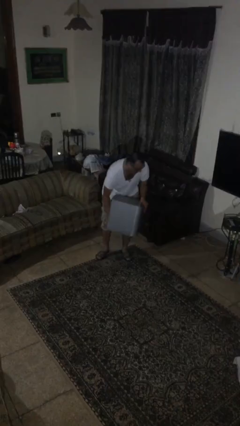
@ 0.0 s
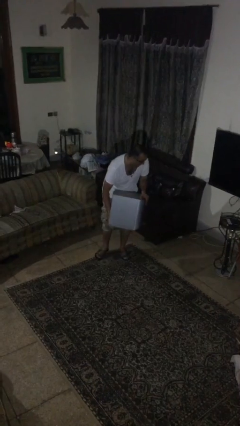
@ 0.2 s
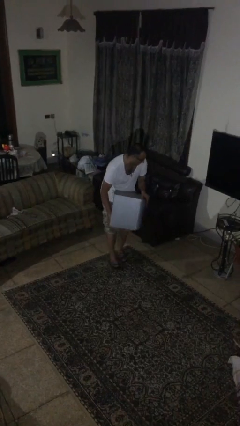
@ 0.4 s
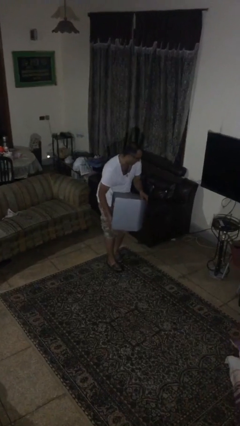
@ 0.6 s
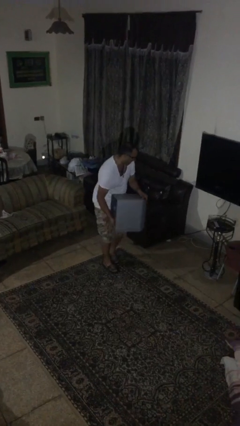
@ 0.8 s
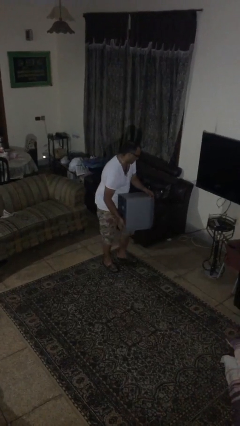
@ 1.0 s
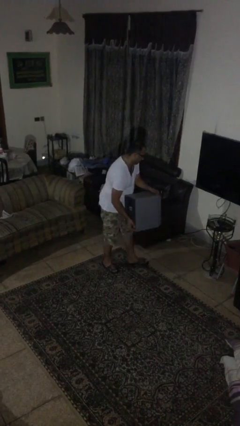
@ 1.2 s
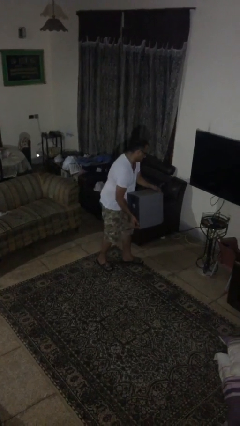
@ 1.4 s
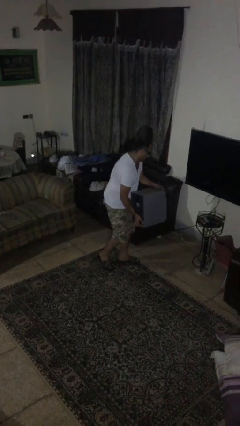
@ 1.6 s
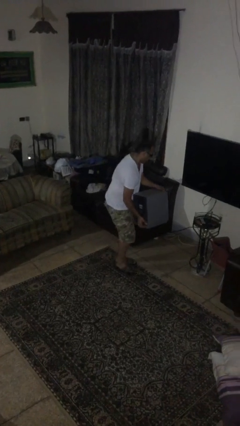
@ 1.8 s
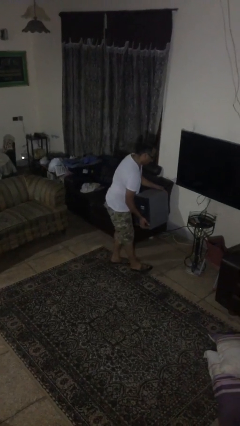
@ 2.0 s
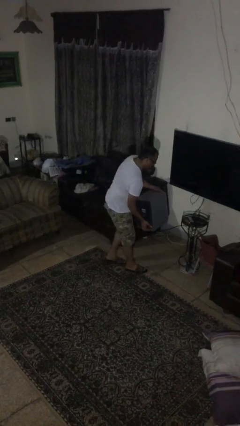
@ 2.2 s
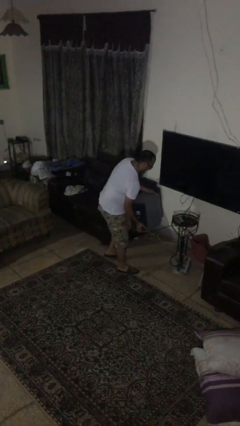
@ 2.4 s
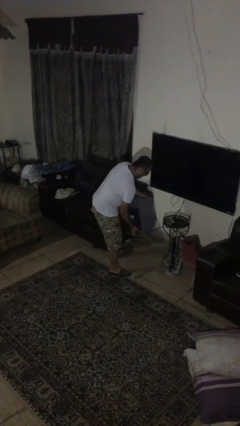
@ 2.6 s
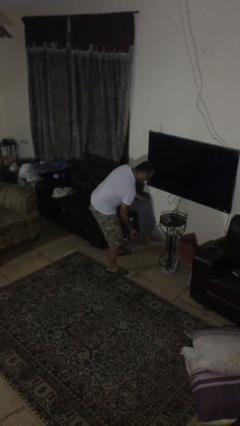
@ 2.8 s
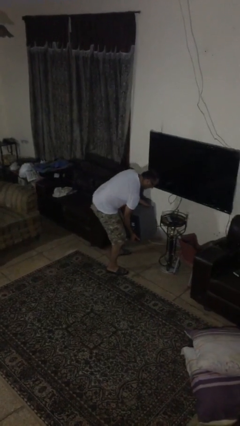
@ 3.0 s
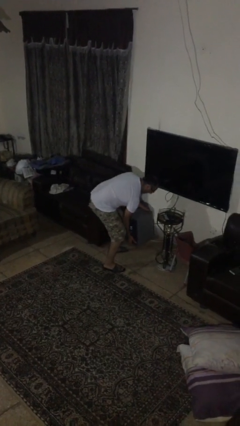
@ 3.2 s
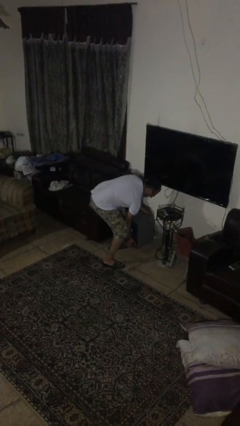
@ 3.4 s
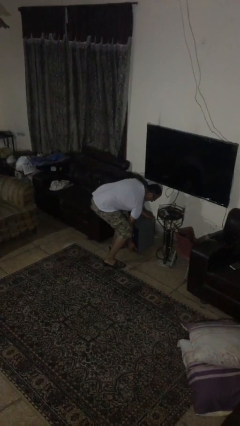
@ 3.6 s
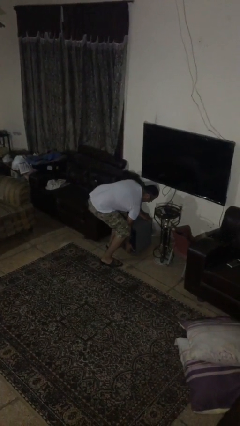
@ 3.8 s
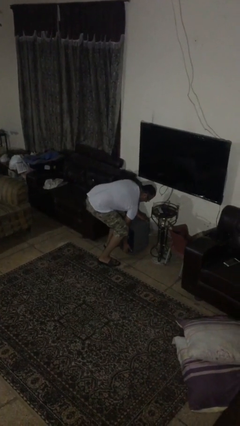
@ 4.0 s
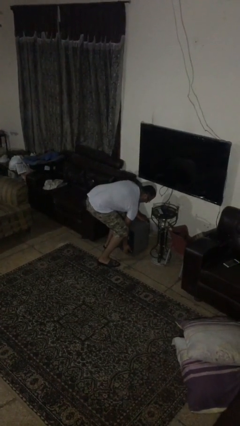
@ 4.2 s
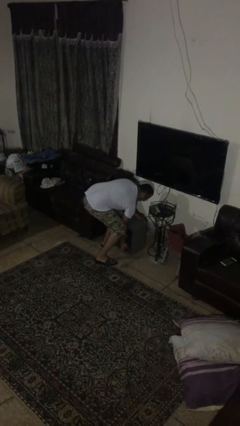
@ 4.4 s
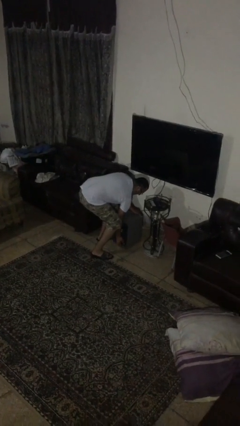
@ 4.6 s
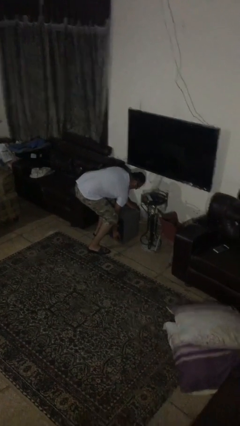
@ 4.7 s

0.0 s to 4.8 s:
person carries heavy object

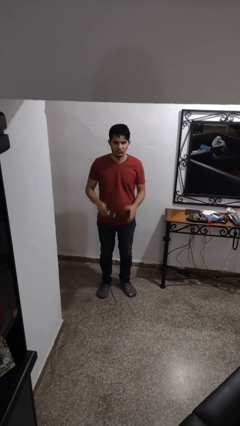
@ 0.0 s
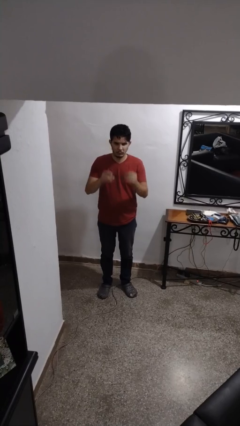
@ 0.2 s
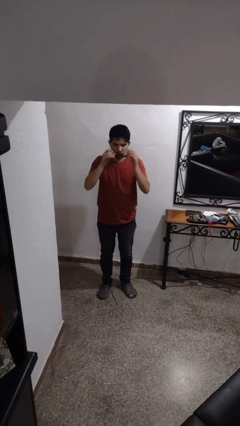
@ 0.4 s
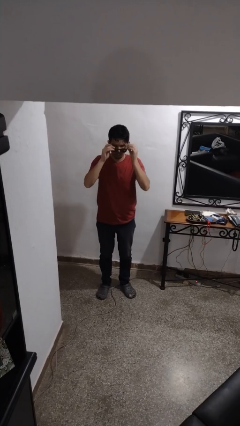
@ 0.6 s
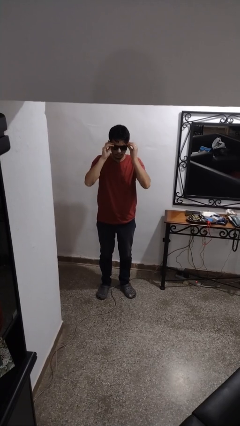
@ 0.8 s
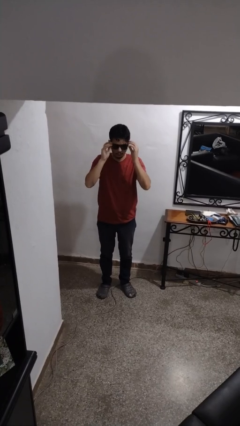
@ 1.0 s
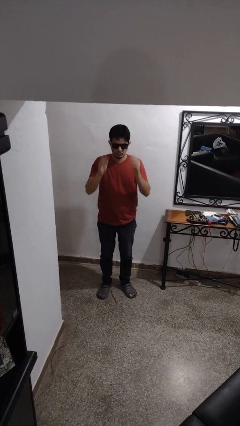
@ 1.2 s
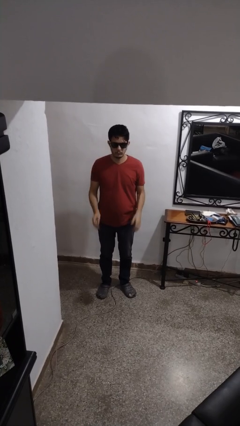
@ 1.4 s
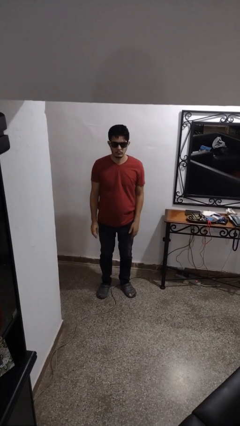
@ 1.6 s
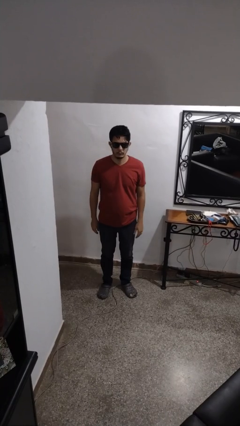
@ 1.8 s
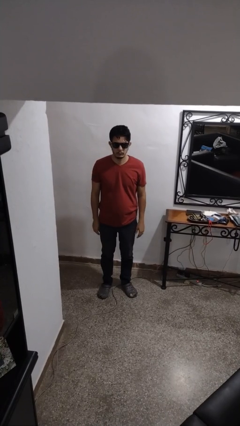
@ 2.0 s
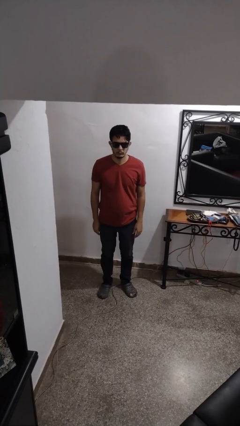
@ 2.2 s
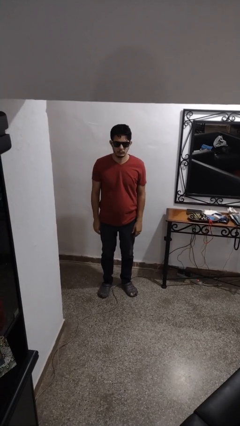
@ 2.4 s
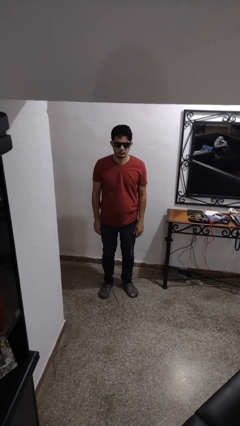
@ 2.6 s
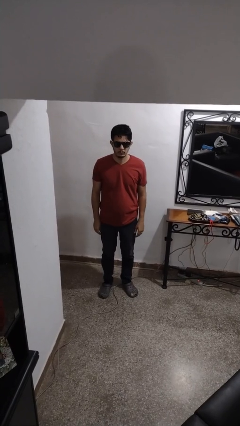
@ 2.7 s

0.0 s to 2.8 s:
person puts on sunglasses

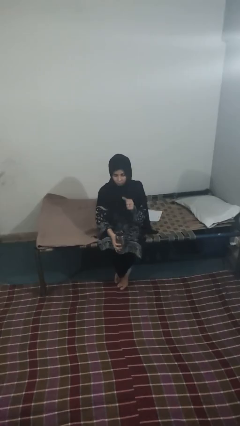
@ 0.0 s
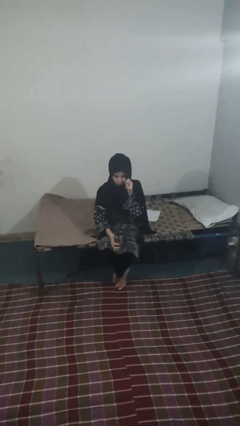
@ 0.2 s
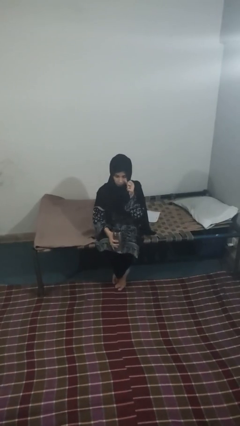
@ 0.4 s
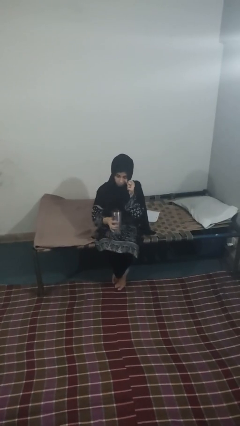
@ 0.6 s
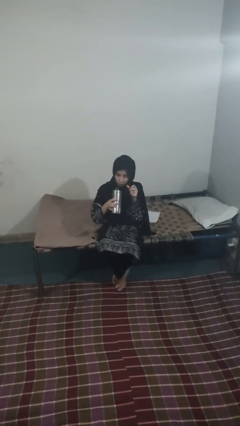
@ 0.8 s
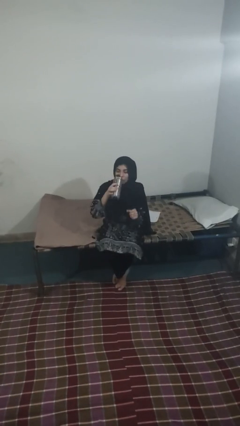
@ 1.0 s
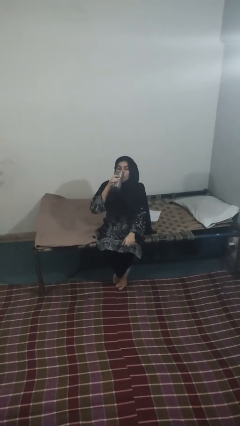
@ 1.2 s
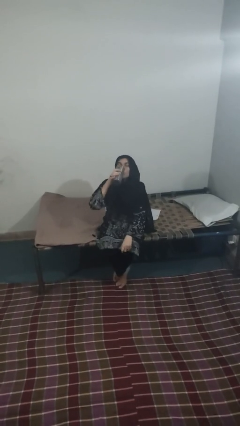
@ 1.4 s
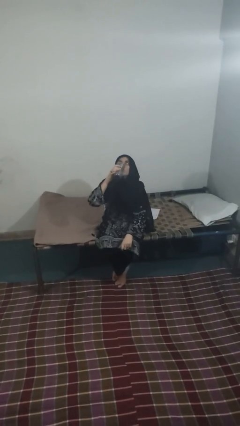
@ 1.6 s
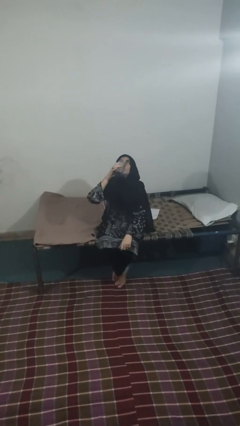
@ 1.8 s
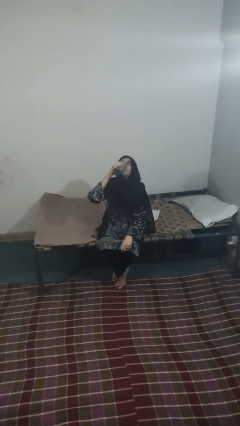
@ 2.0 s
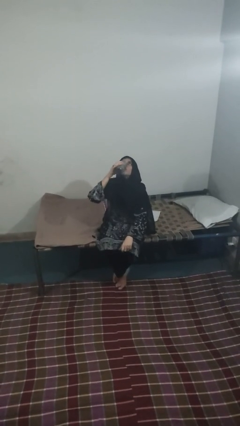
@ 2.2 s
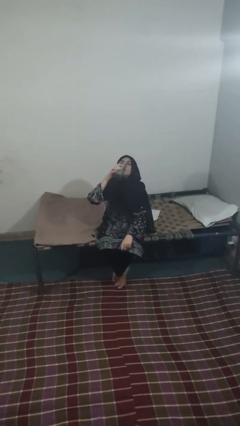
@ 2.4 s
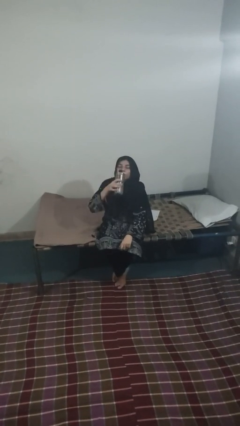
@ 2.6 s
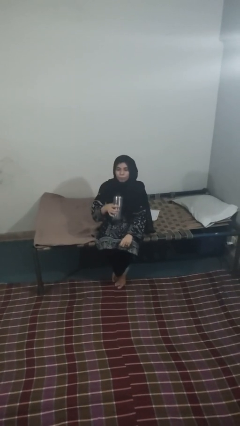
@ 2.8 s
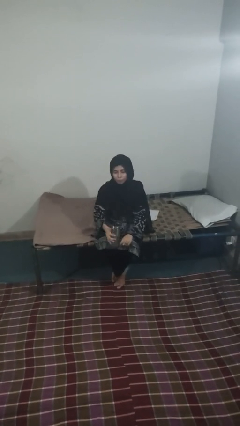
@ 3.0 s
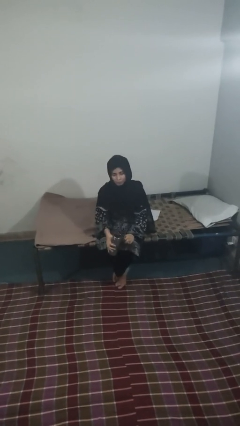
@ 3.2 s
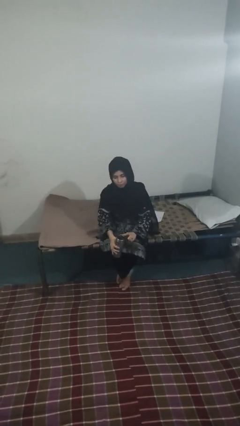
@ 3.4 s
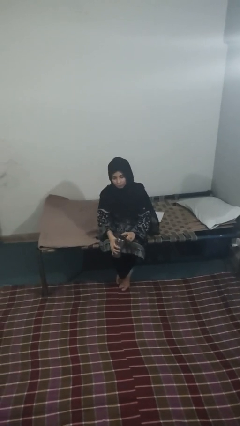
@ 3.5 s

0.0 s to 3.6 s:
person drinks from beverage can

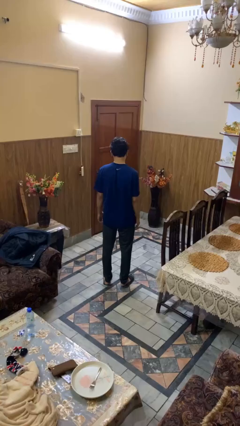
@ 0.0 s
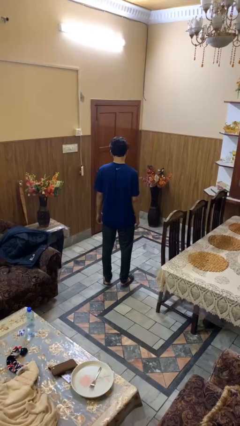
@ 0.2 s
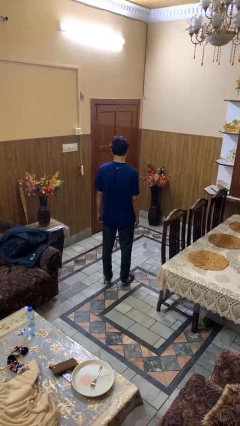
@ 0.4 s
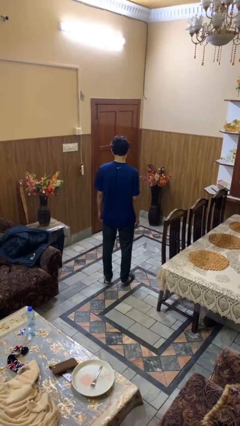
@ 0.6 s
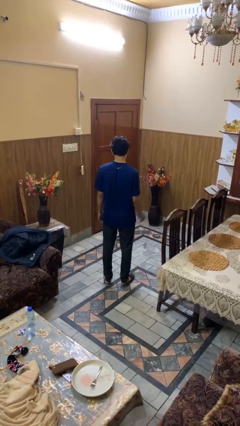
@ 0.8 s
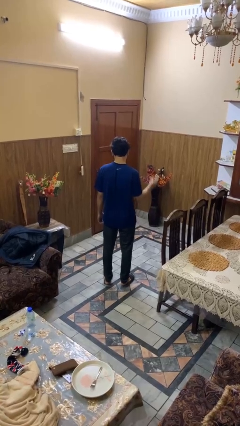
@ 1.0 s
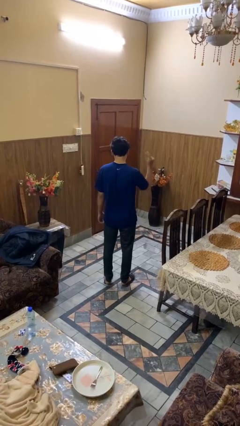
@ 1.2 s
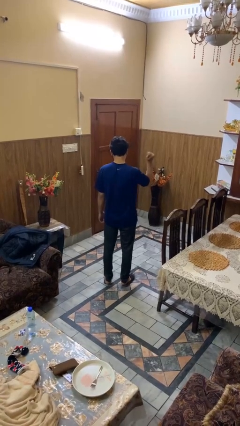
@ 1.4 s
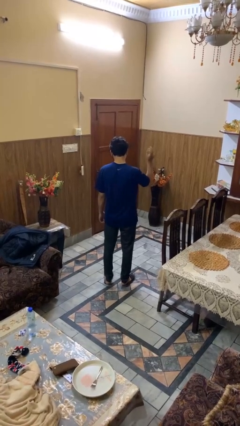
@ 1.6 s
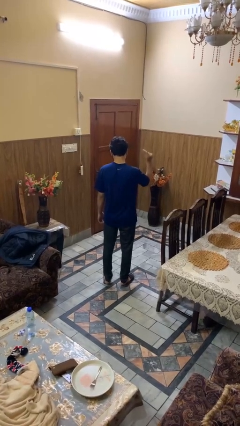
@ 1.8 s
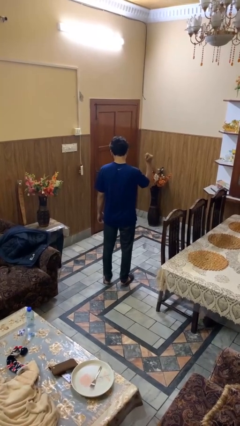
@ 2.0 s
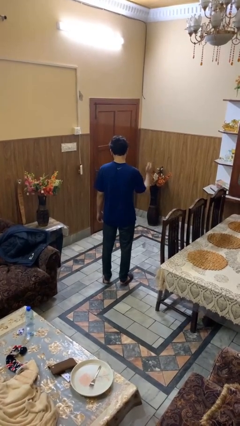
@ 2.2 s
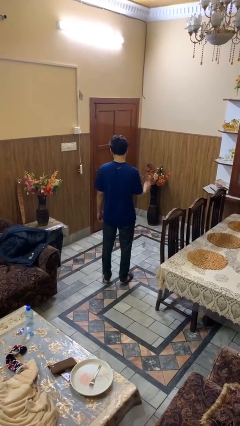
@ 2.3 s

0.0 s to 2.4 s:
person snaps fingers

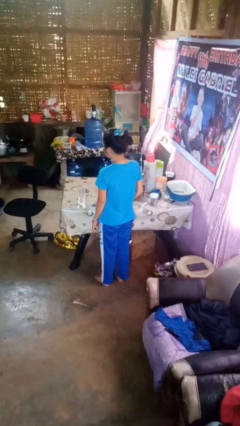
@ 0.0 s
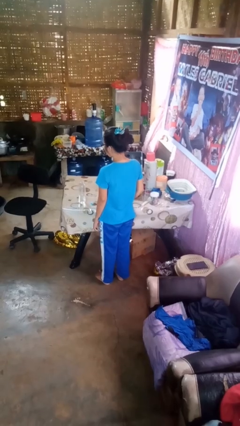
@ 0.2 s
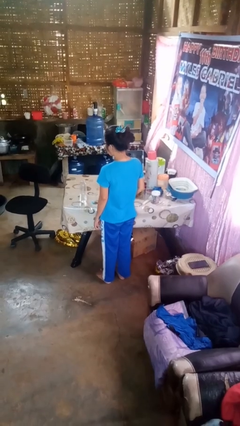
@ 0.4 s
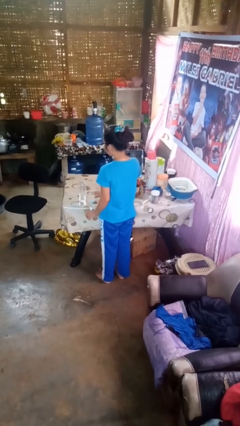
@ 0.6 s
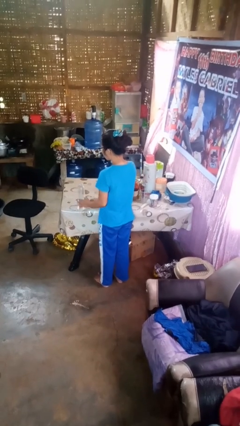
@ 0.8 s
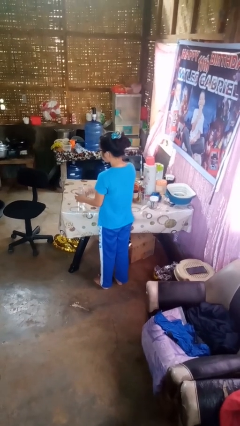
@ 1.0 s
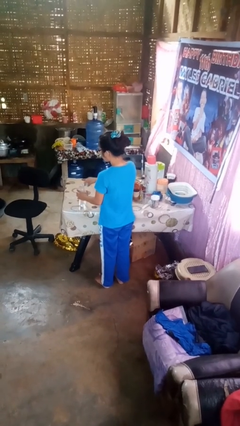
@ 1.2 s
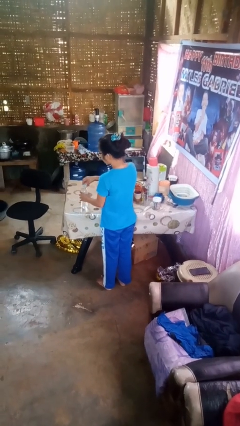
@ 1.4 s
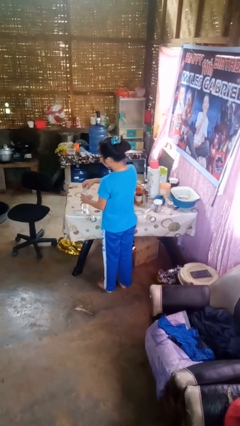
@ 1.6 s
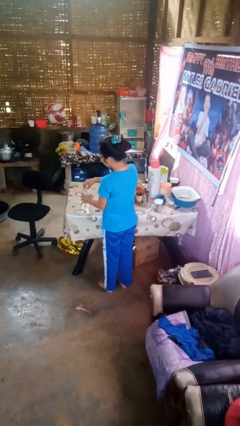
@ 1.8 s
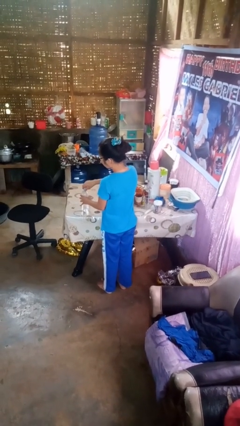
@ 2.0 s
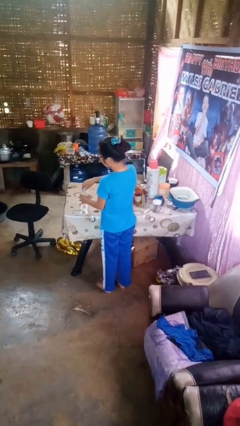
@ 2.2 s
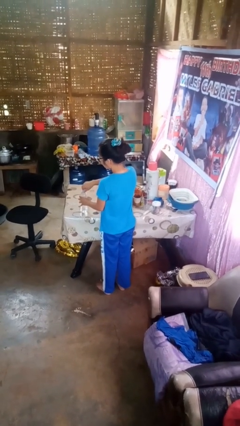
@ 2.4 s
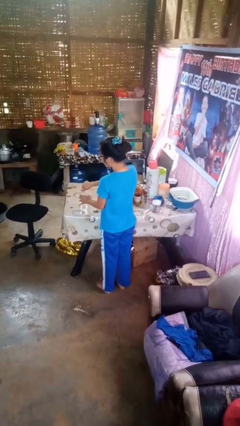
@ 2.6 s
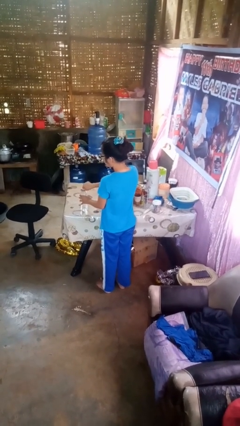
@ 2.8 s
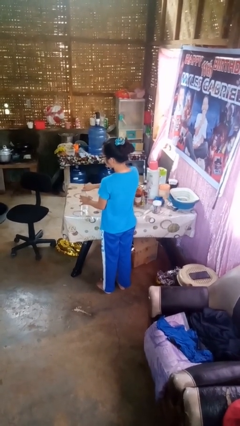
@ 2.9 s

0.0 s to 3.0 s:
person screws lid to bottle

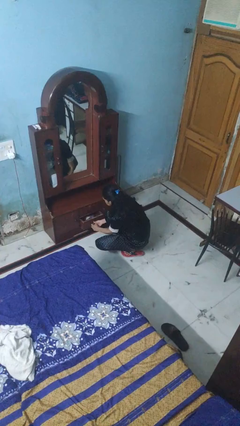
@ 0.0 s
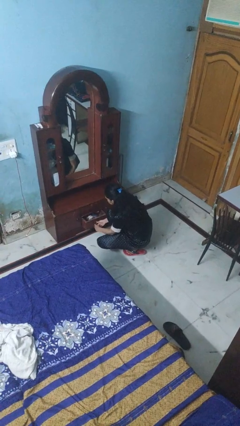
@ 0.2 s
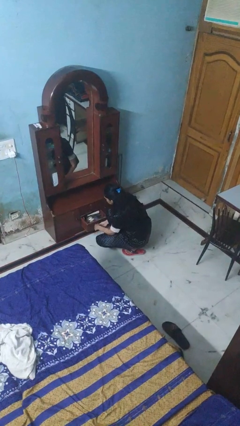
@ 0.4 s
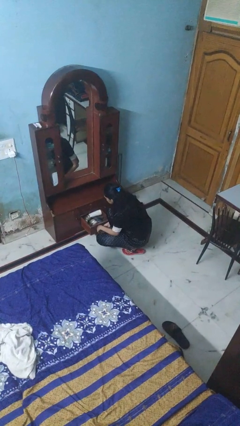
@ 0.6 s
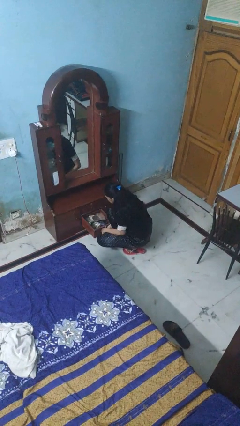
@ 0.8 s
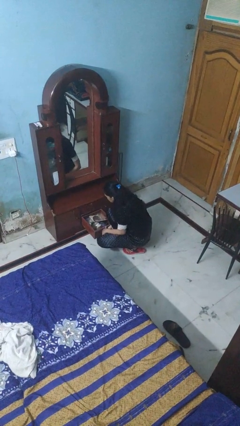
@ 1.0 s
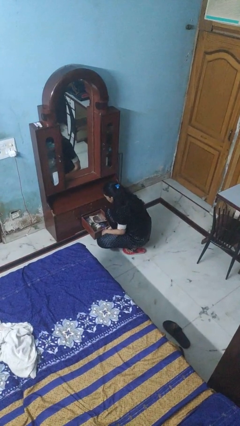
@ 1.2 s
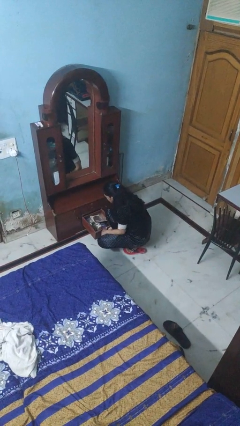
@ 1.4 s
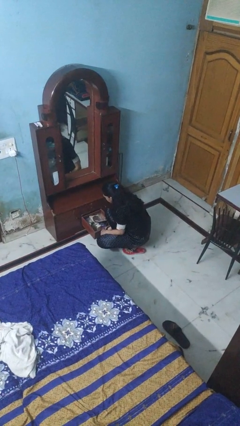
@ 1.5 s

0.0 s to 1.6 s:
person opens dresser drawer
